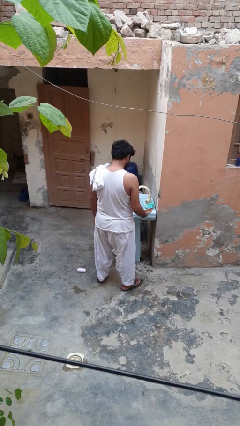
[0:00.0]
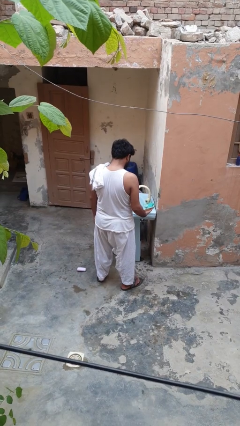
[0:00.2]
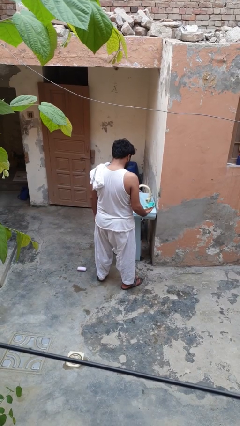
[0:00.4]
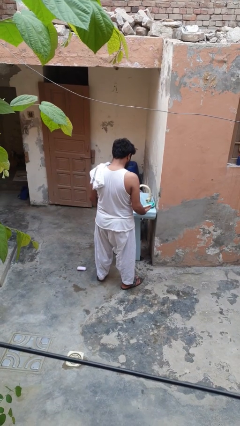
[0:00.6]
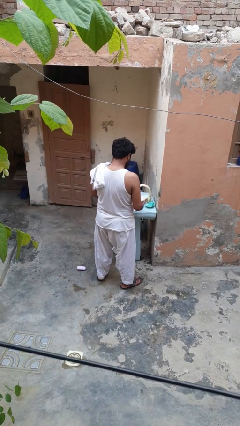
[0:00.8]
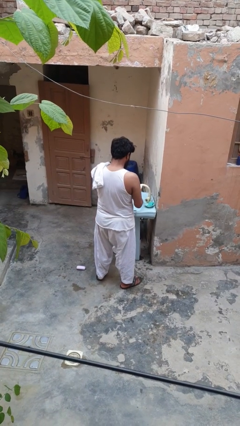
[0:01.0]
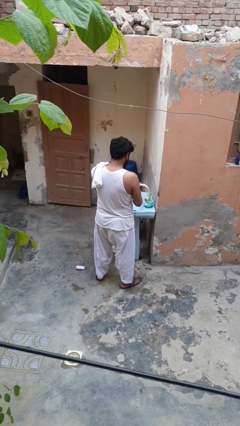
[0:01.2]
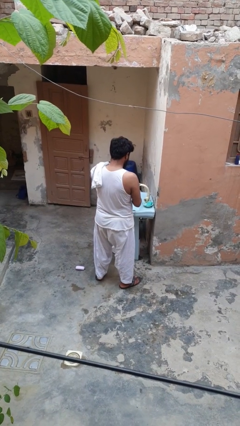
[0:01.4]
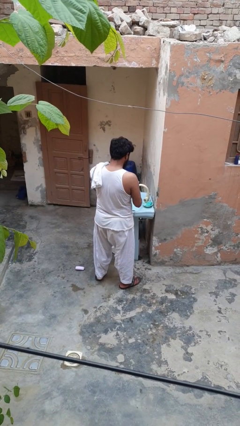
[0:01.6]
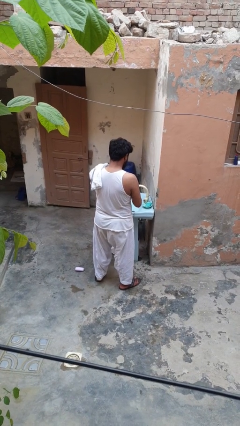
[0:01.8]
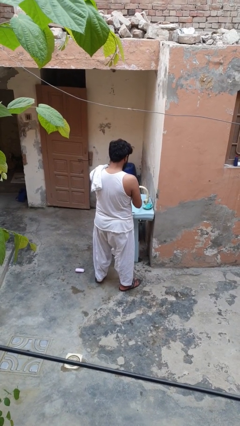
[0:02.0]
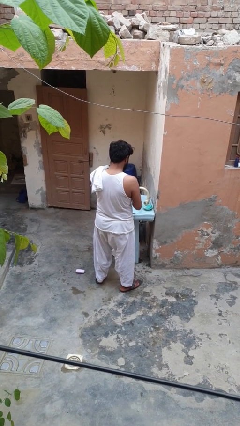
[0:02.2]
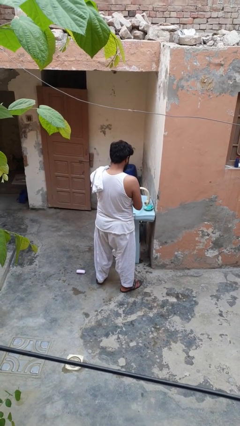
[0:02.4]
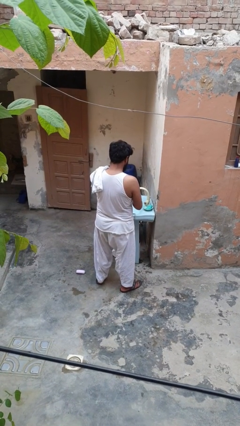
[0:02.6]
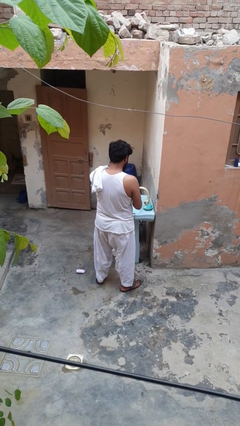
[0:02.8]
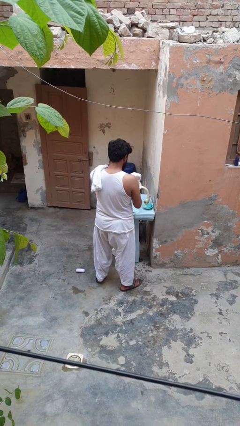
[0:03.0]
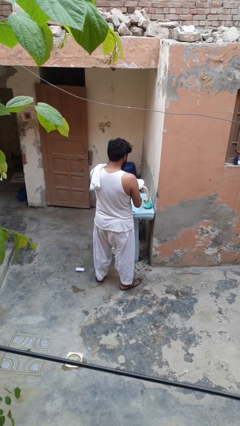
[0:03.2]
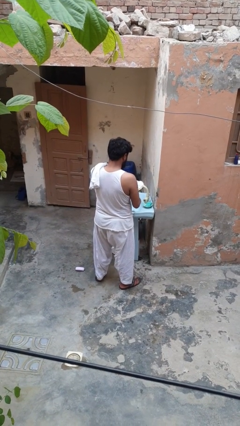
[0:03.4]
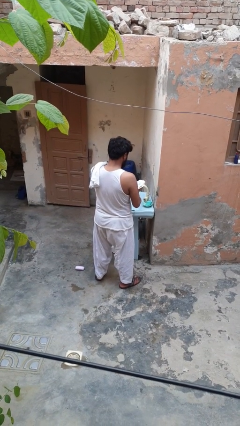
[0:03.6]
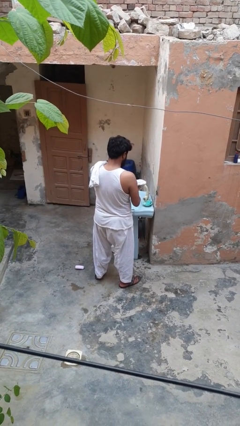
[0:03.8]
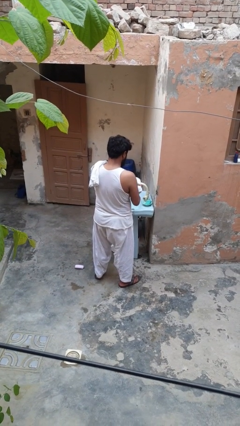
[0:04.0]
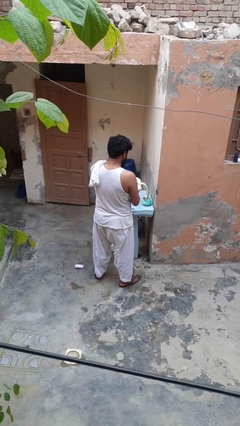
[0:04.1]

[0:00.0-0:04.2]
person dries dish

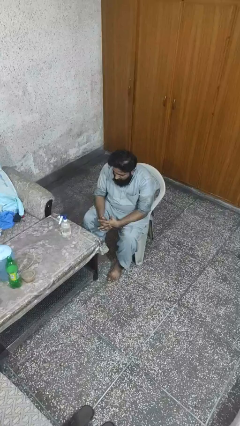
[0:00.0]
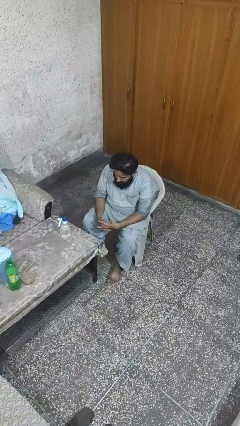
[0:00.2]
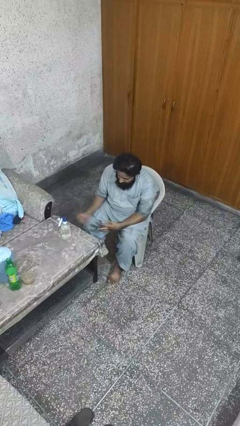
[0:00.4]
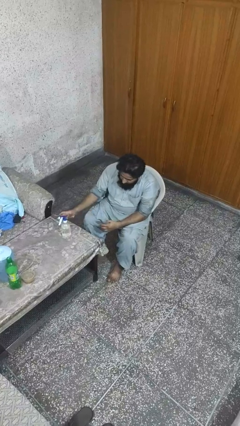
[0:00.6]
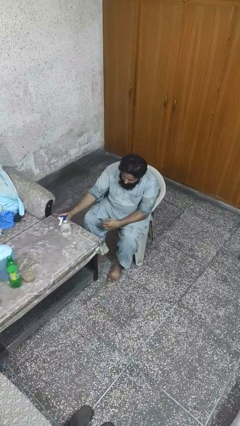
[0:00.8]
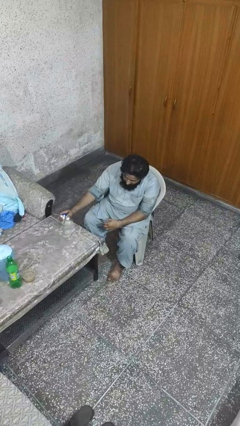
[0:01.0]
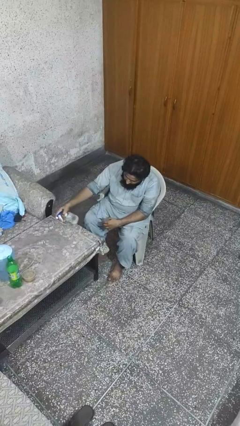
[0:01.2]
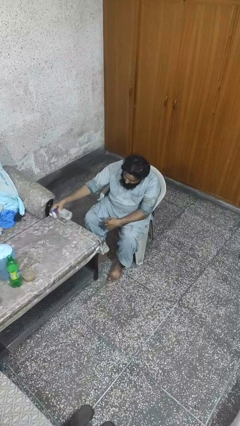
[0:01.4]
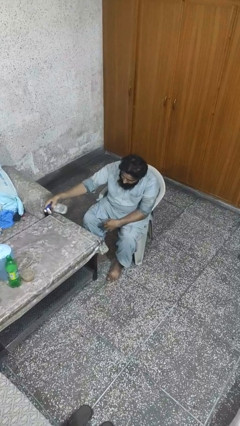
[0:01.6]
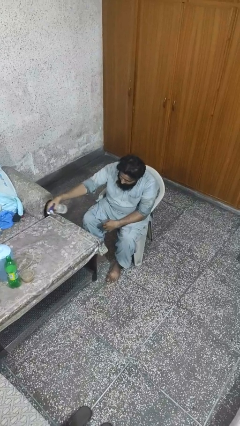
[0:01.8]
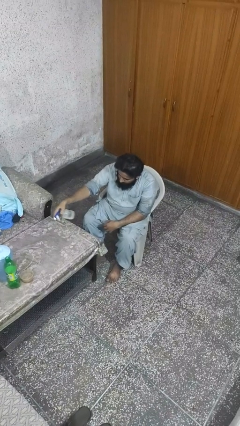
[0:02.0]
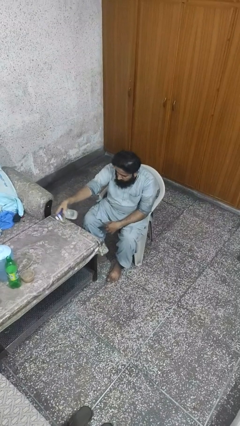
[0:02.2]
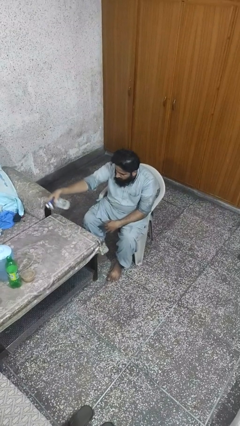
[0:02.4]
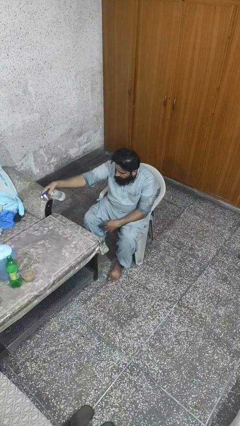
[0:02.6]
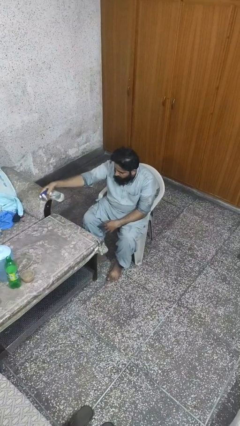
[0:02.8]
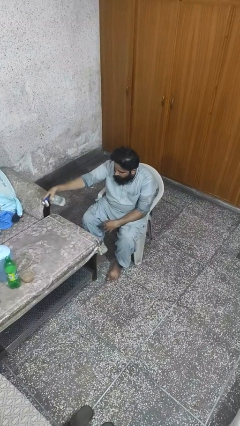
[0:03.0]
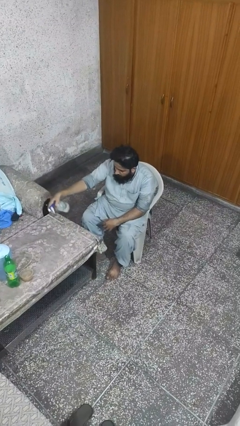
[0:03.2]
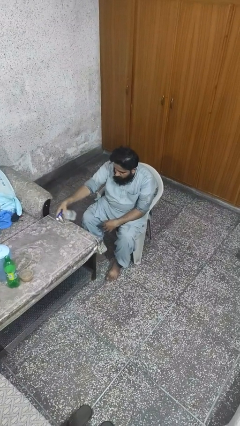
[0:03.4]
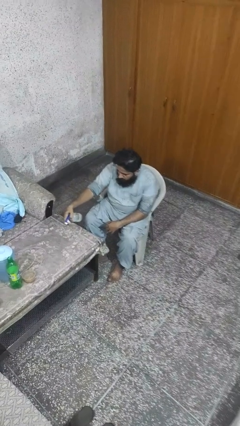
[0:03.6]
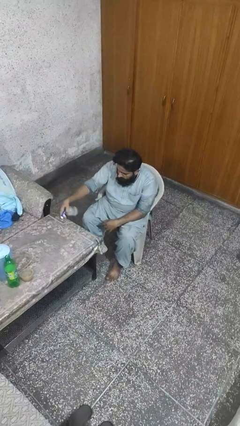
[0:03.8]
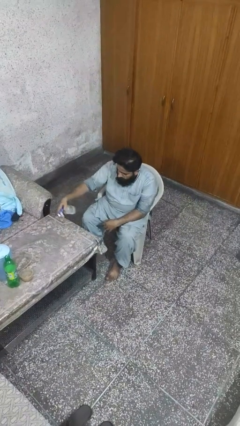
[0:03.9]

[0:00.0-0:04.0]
person sprays from bottle

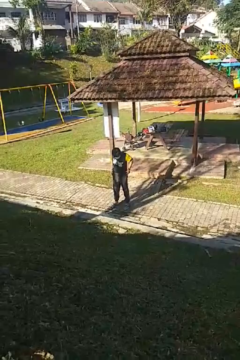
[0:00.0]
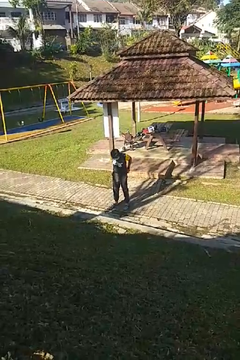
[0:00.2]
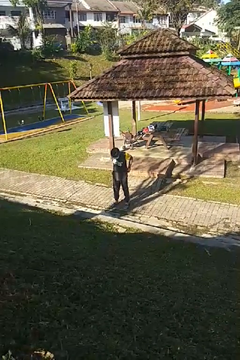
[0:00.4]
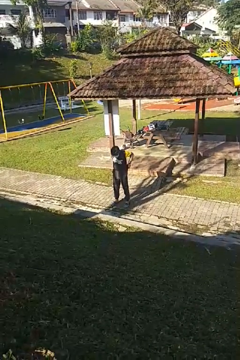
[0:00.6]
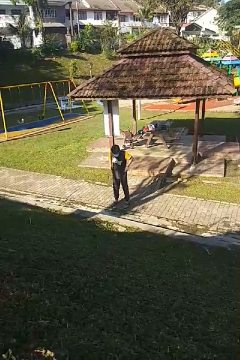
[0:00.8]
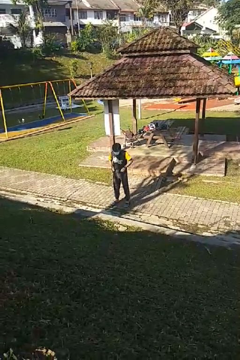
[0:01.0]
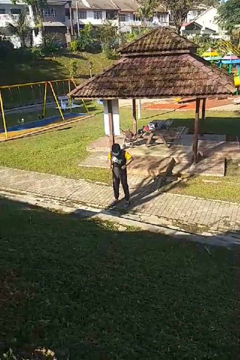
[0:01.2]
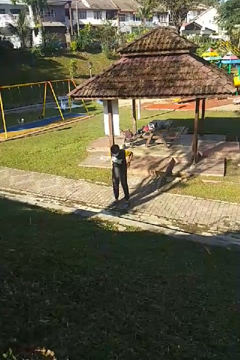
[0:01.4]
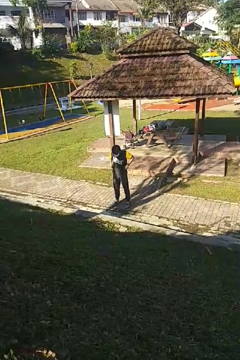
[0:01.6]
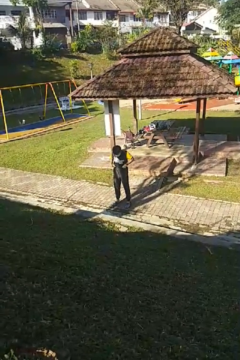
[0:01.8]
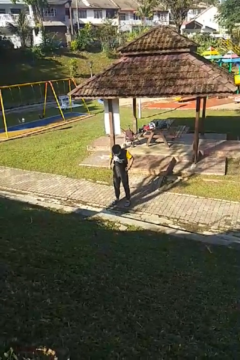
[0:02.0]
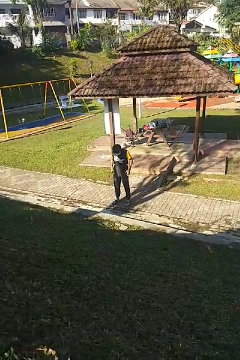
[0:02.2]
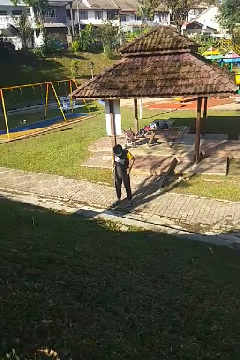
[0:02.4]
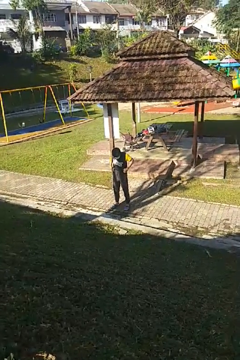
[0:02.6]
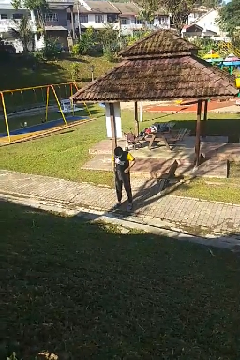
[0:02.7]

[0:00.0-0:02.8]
person hikes up pants

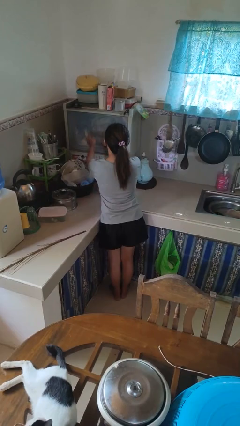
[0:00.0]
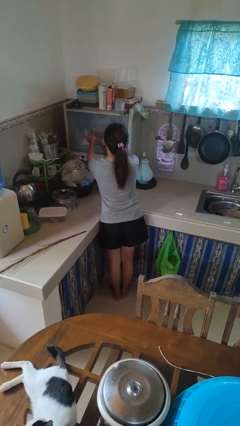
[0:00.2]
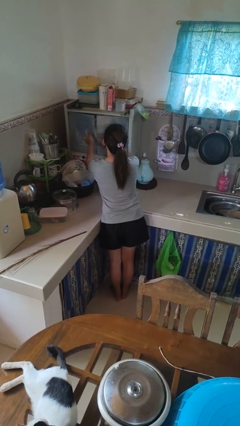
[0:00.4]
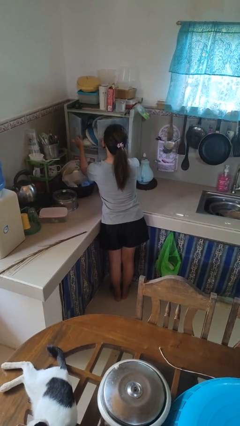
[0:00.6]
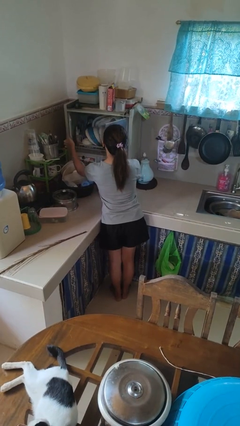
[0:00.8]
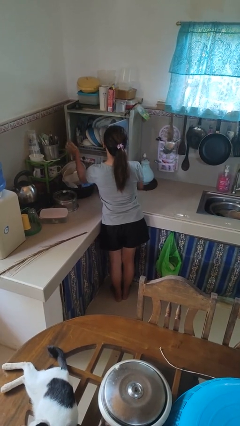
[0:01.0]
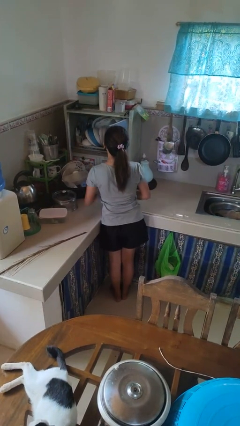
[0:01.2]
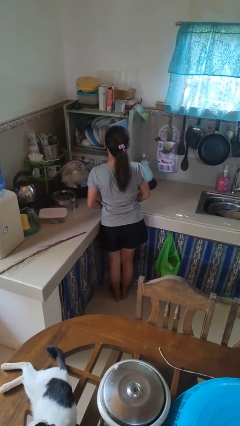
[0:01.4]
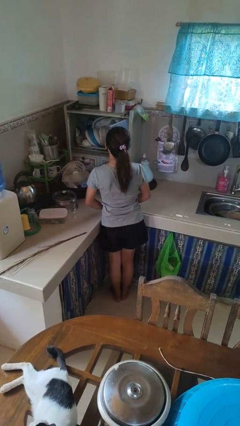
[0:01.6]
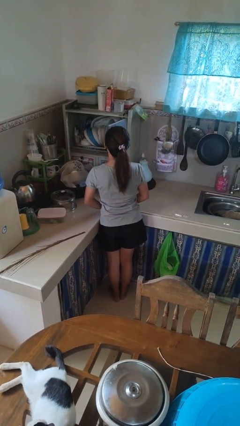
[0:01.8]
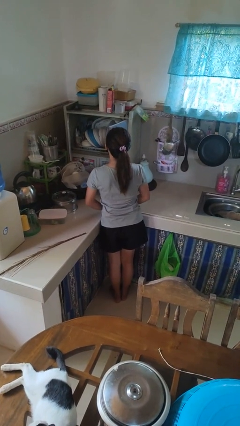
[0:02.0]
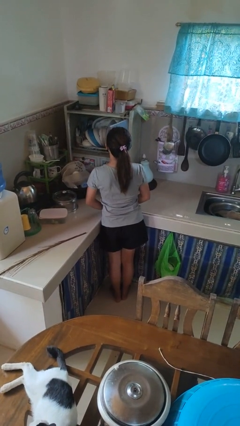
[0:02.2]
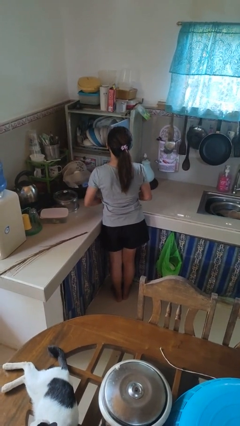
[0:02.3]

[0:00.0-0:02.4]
person opens kitchen drawer

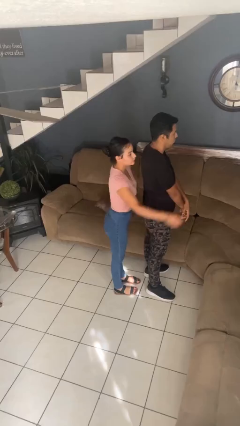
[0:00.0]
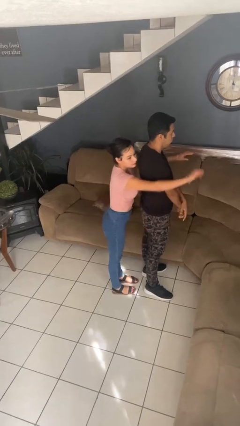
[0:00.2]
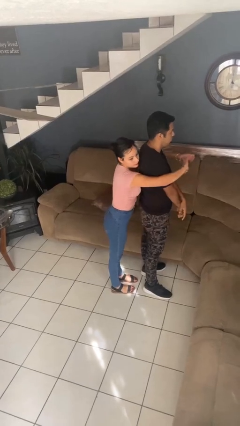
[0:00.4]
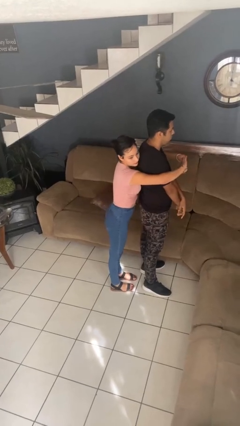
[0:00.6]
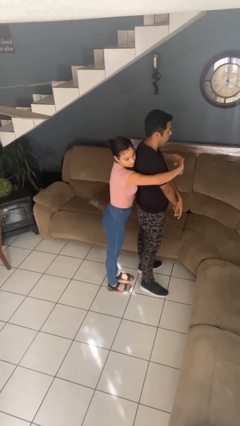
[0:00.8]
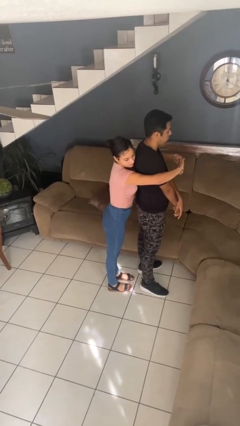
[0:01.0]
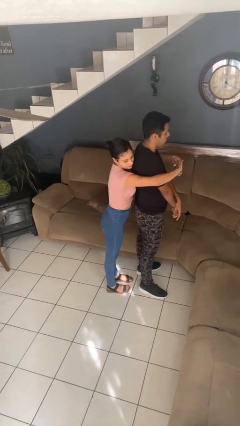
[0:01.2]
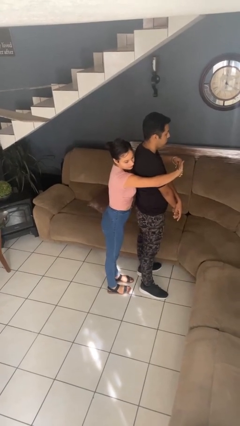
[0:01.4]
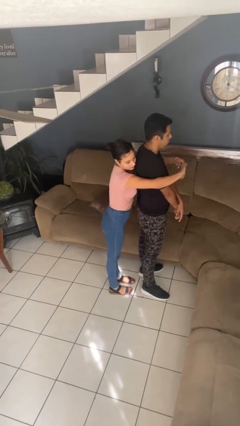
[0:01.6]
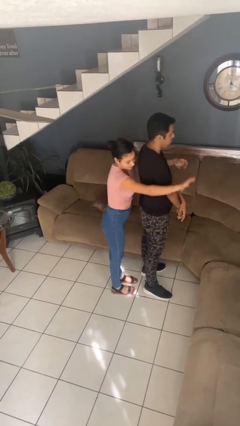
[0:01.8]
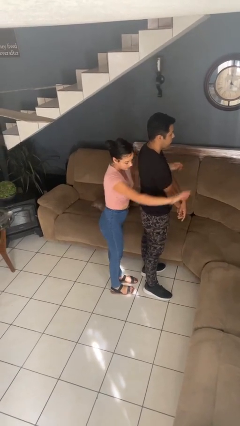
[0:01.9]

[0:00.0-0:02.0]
person hugs person from behind

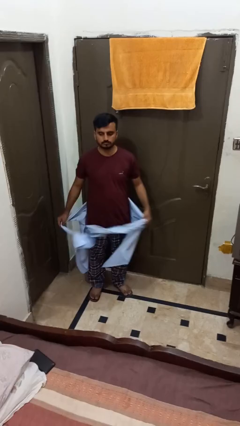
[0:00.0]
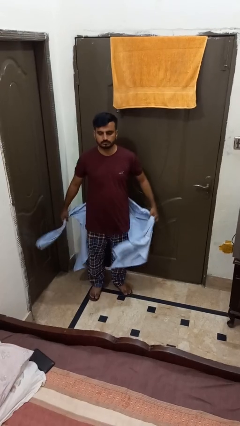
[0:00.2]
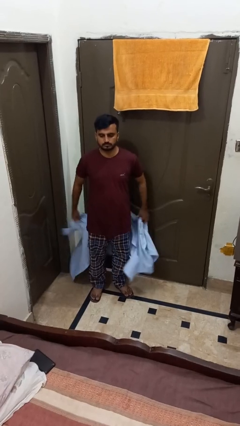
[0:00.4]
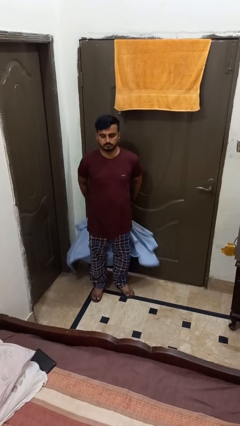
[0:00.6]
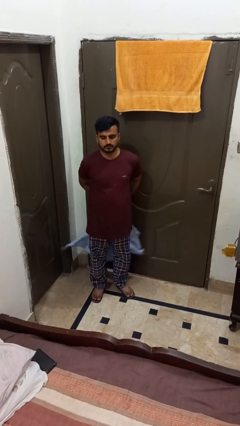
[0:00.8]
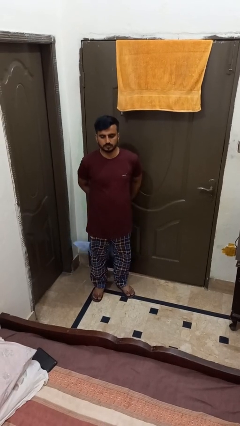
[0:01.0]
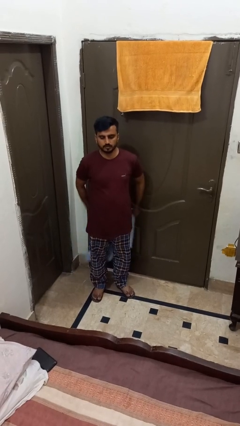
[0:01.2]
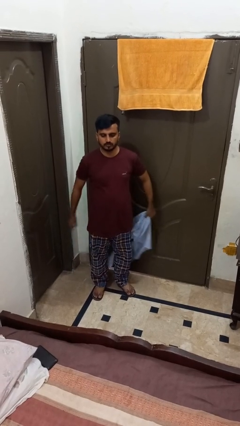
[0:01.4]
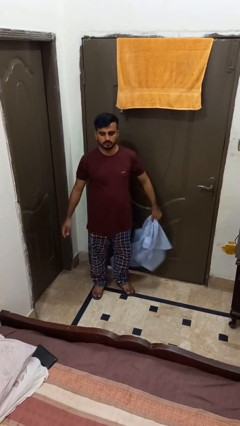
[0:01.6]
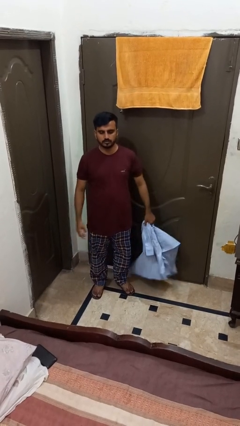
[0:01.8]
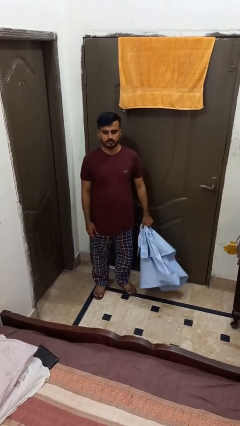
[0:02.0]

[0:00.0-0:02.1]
person unties jacket around waist

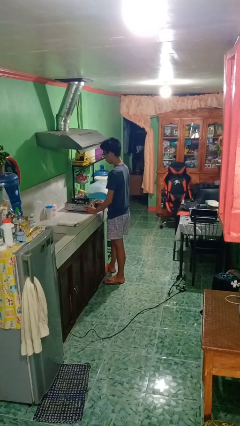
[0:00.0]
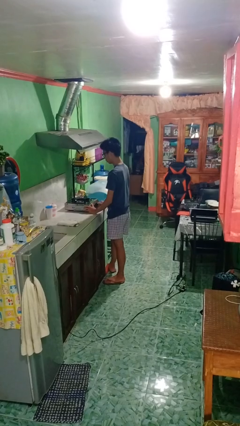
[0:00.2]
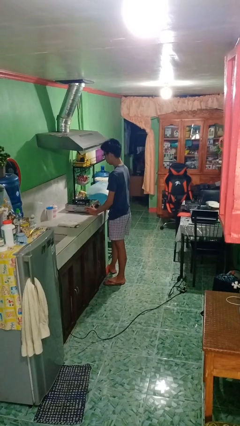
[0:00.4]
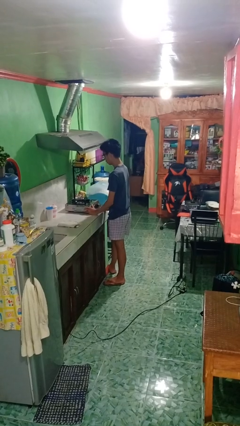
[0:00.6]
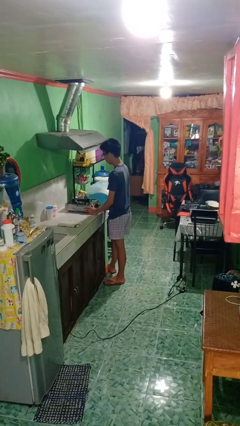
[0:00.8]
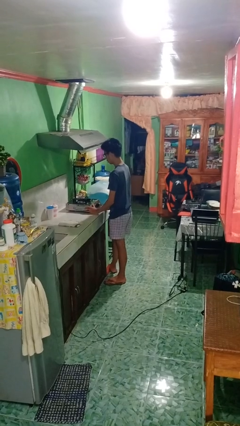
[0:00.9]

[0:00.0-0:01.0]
person turns off stovetop
